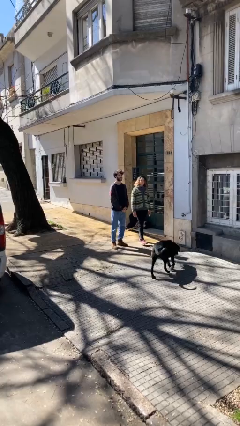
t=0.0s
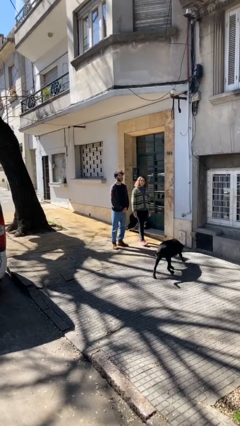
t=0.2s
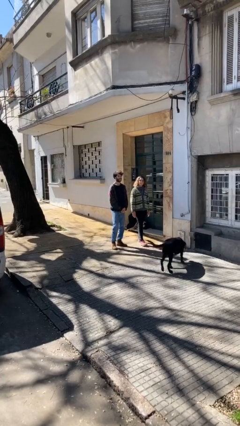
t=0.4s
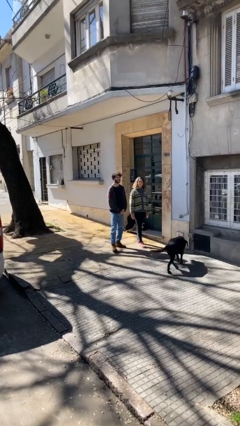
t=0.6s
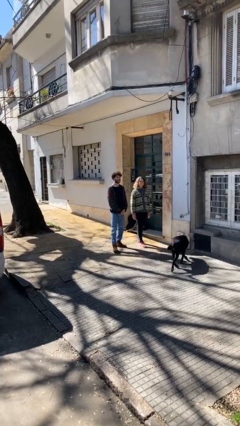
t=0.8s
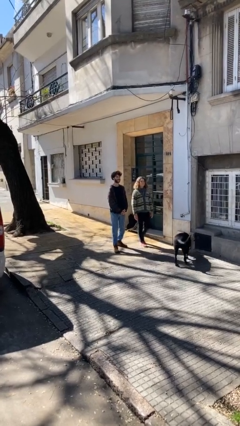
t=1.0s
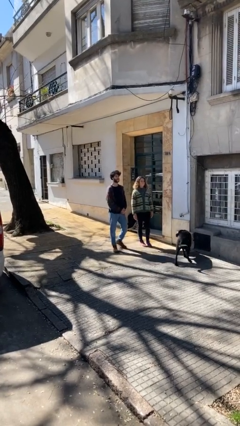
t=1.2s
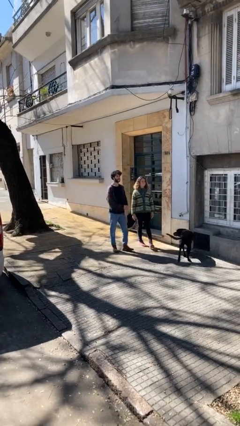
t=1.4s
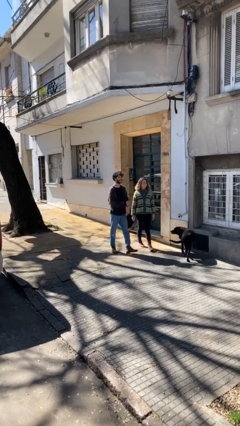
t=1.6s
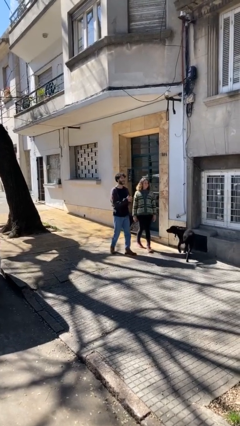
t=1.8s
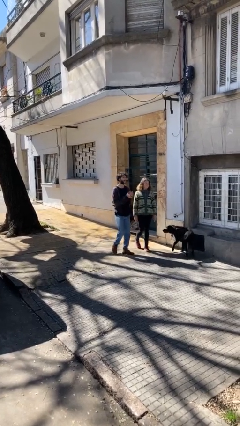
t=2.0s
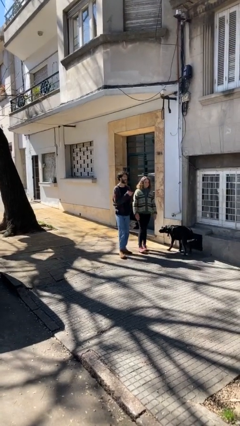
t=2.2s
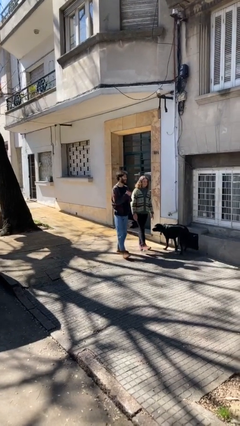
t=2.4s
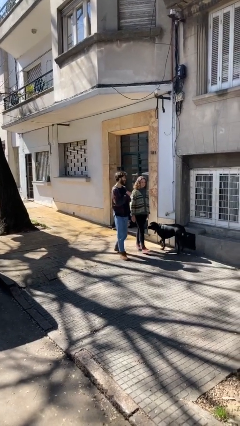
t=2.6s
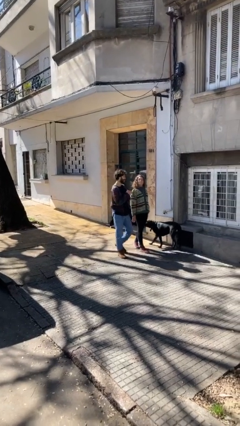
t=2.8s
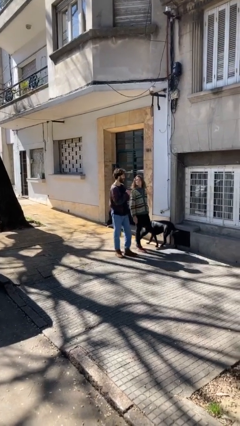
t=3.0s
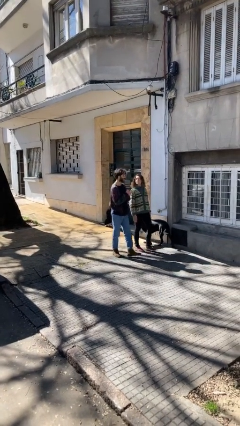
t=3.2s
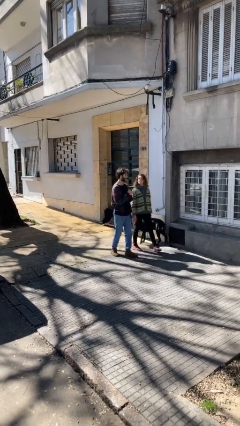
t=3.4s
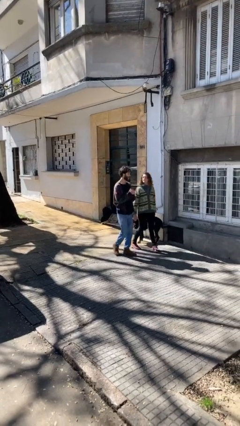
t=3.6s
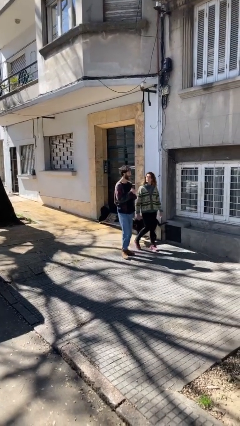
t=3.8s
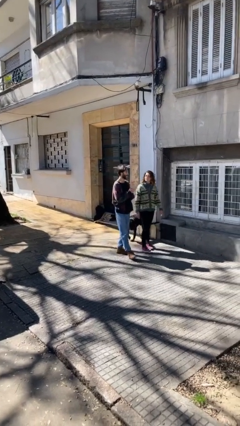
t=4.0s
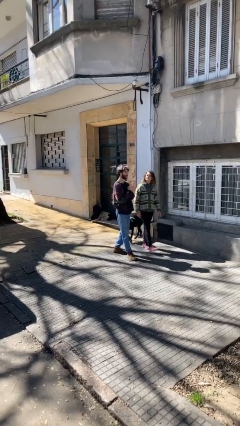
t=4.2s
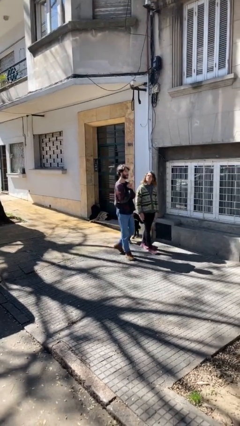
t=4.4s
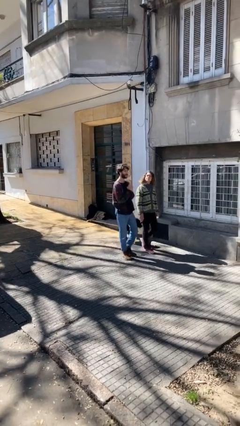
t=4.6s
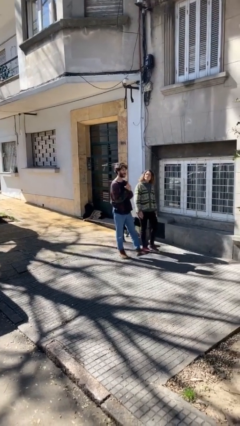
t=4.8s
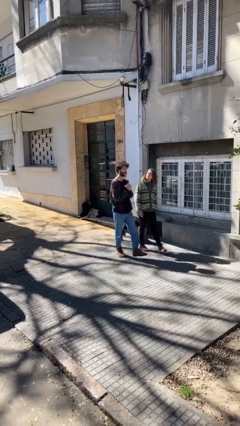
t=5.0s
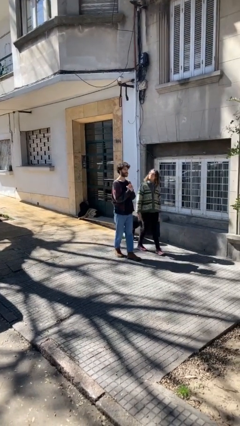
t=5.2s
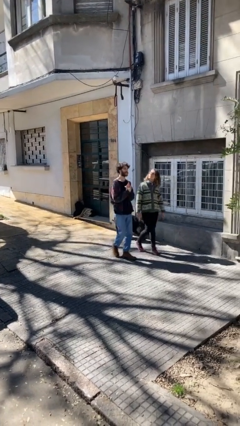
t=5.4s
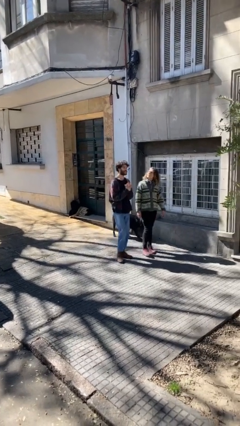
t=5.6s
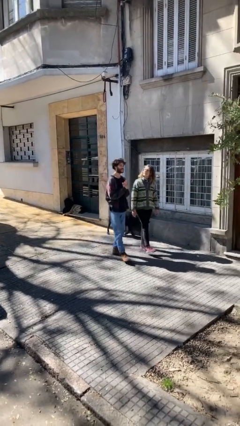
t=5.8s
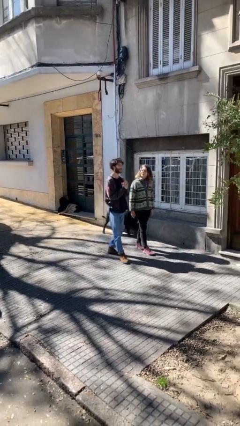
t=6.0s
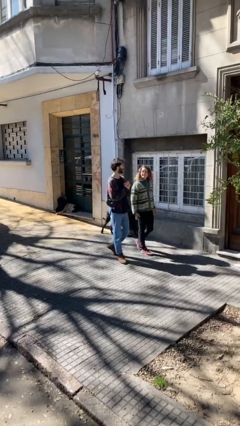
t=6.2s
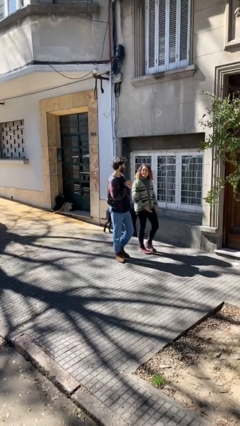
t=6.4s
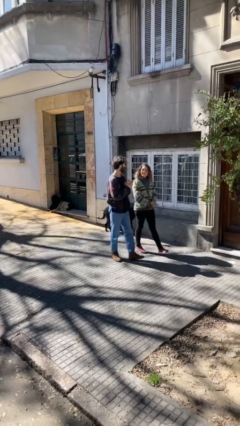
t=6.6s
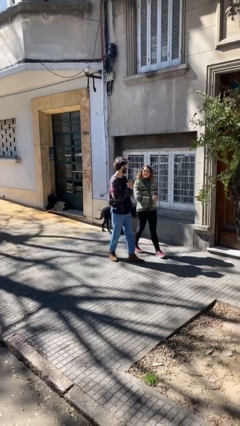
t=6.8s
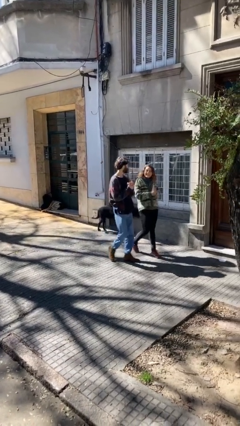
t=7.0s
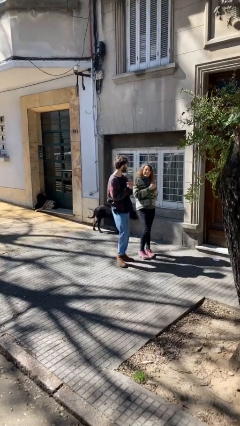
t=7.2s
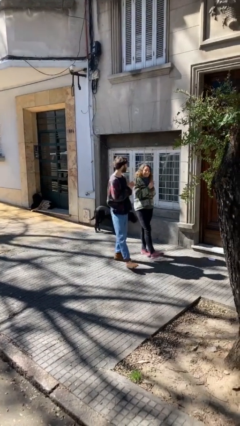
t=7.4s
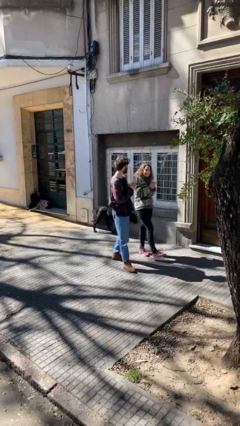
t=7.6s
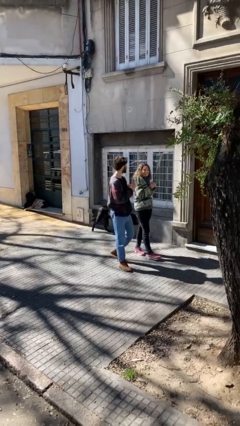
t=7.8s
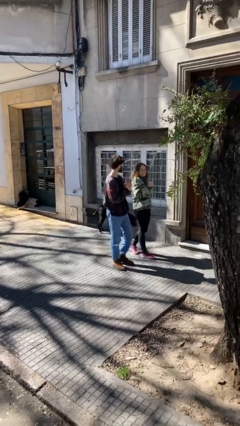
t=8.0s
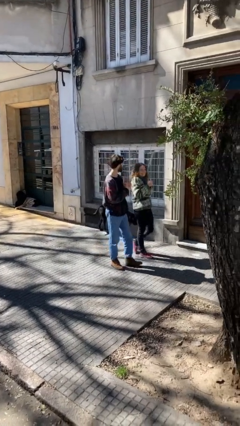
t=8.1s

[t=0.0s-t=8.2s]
person talks to person

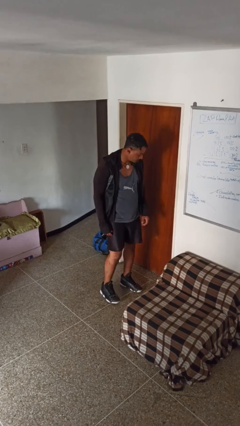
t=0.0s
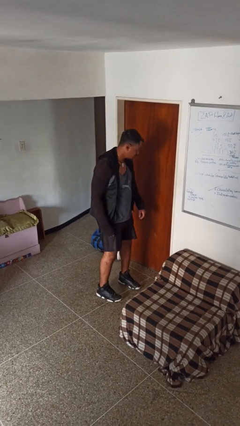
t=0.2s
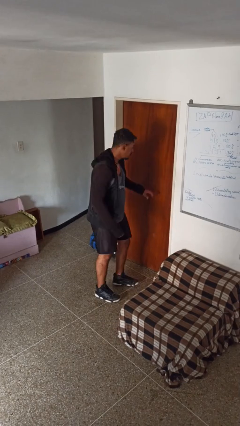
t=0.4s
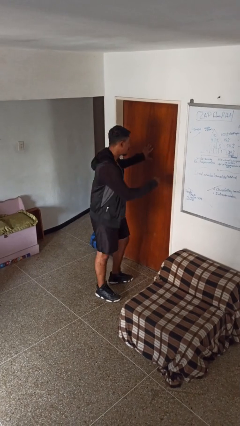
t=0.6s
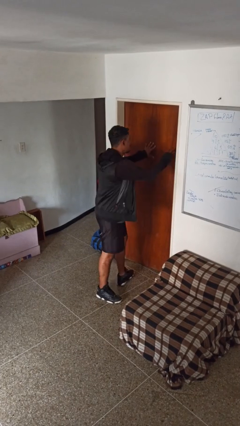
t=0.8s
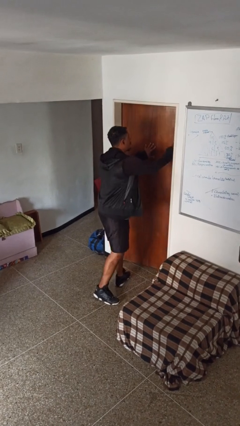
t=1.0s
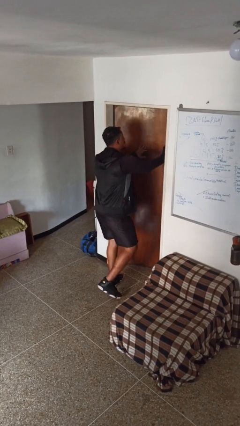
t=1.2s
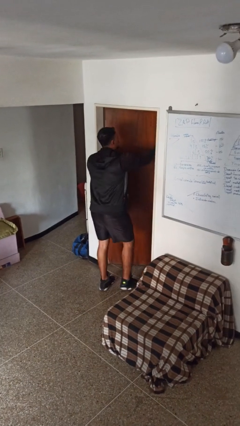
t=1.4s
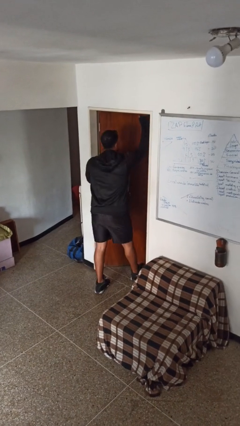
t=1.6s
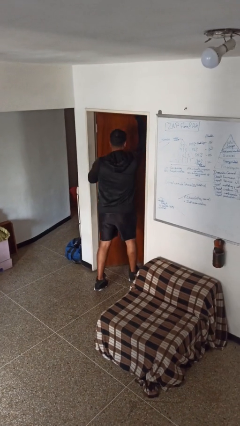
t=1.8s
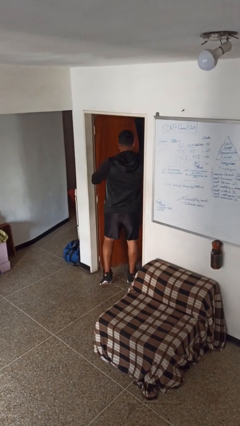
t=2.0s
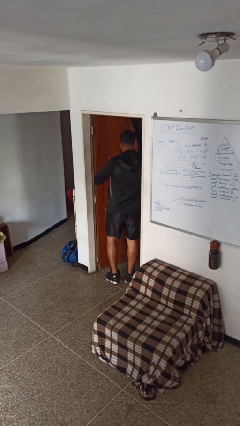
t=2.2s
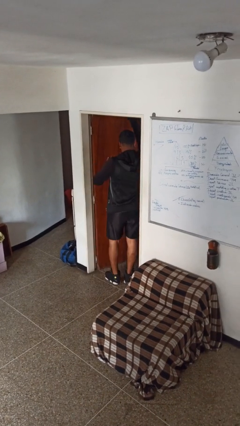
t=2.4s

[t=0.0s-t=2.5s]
person opens facility door

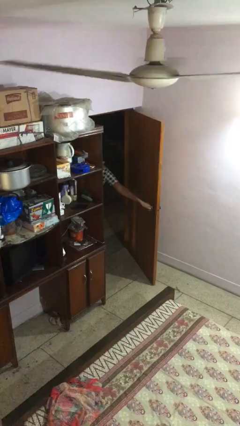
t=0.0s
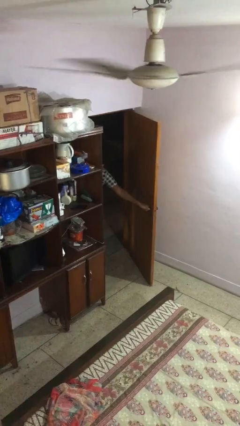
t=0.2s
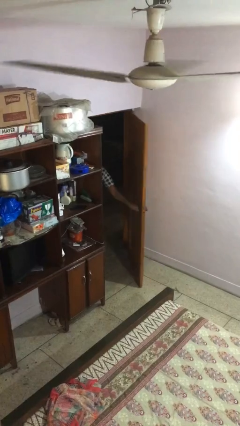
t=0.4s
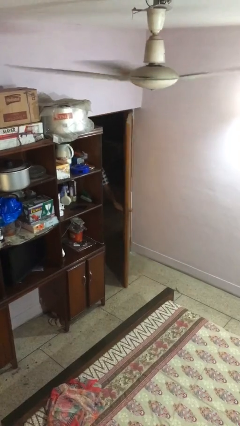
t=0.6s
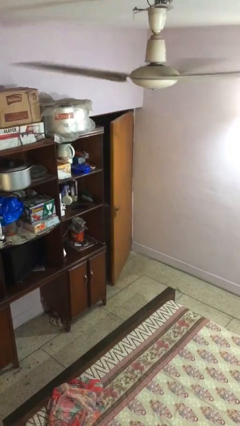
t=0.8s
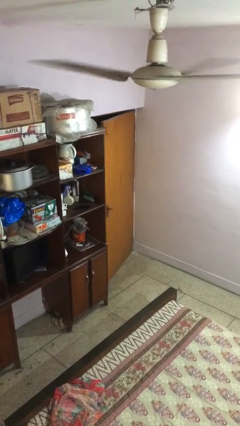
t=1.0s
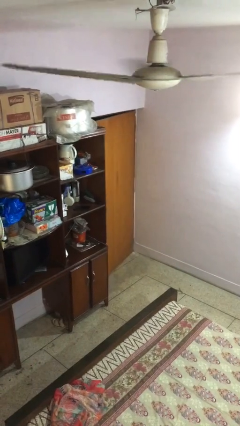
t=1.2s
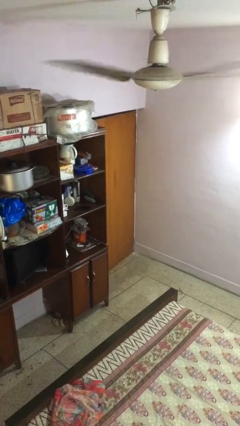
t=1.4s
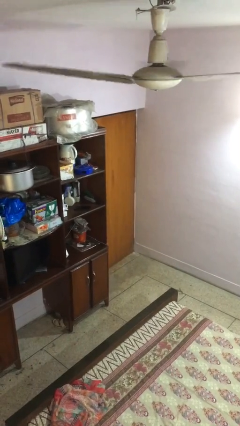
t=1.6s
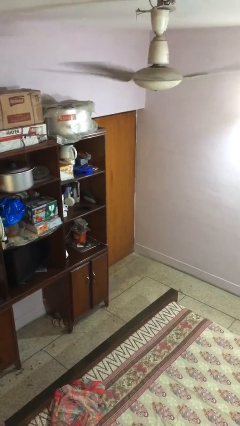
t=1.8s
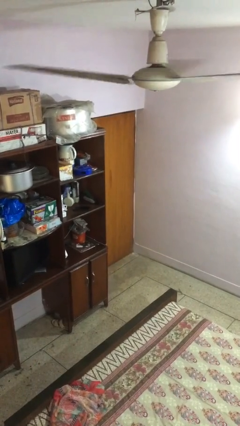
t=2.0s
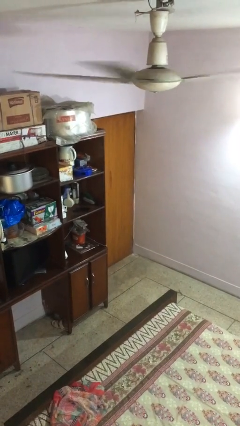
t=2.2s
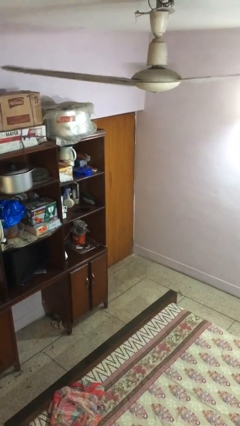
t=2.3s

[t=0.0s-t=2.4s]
person closes facility door

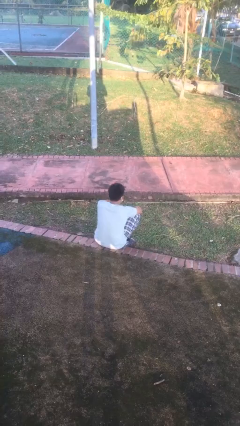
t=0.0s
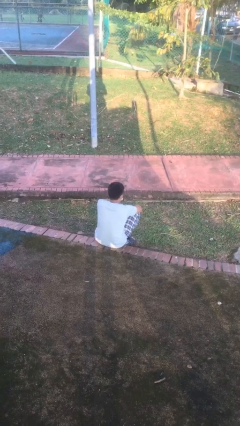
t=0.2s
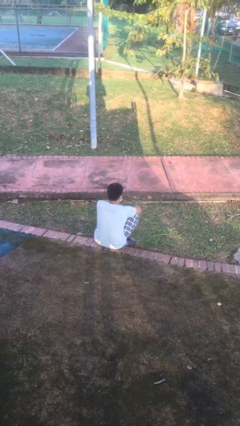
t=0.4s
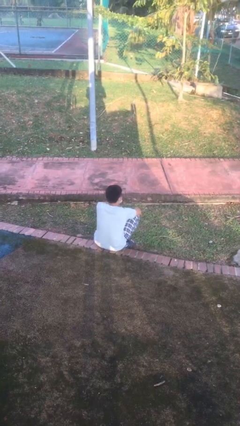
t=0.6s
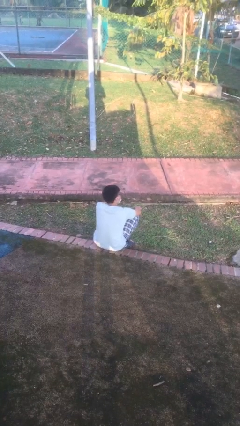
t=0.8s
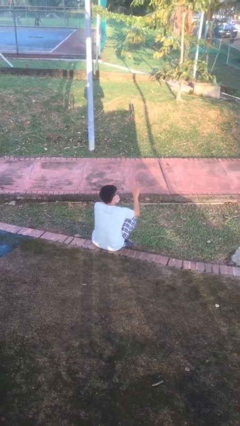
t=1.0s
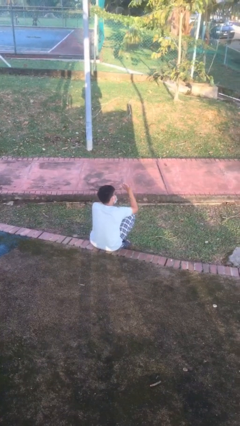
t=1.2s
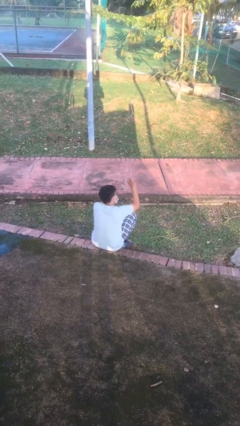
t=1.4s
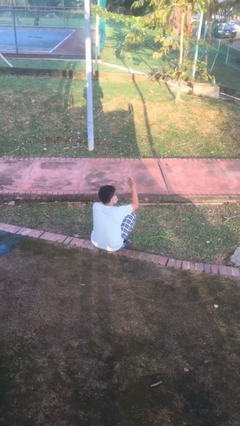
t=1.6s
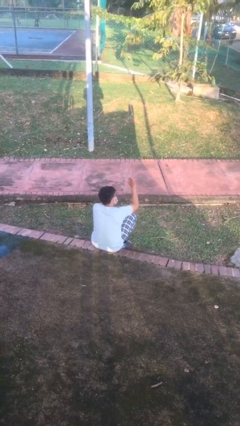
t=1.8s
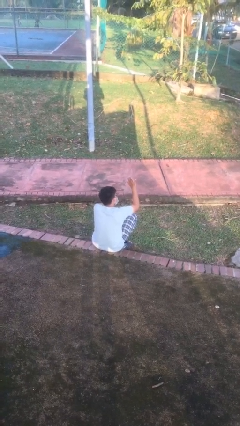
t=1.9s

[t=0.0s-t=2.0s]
person gestures stop

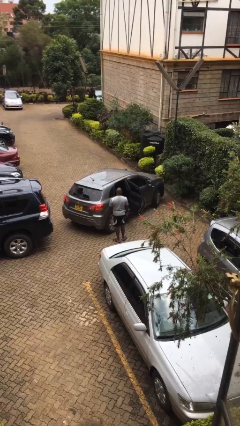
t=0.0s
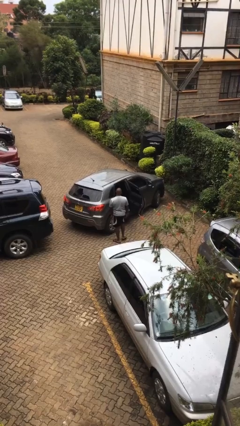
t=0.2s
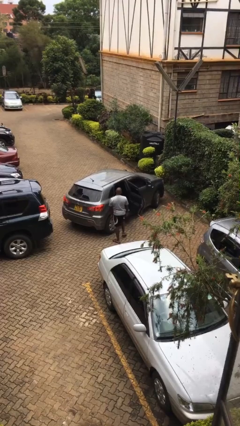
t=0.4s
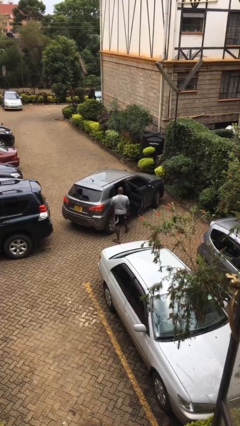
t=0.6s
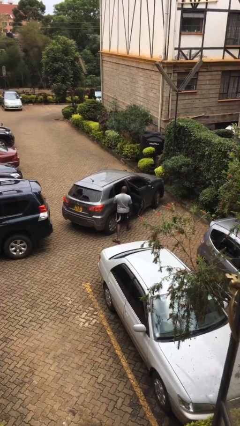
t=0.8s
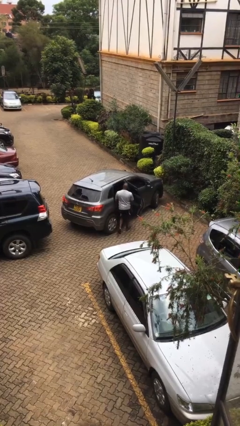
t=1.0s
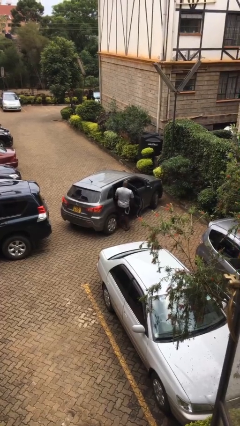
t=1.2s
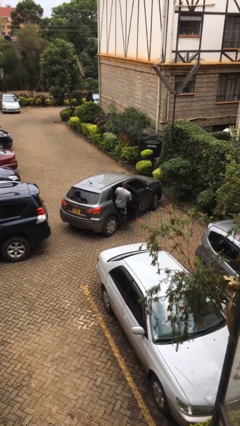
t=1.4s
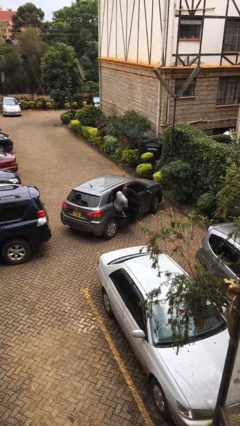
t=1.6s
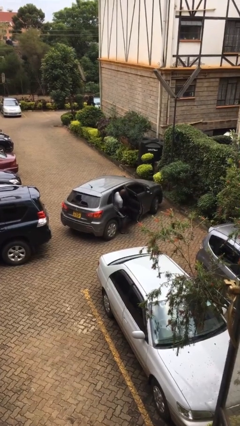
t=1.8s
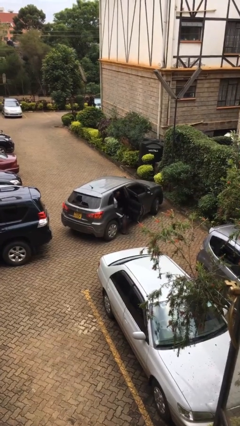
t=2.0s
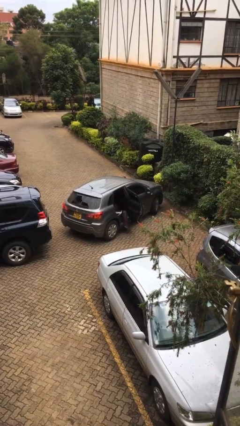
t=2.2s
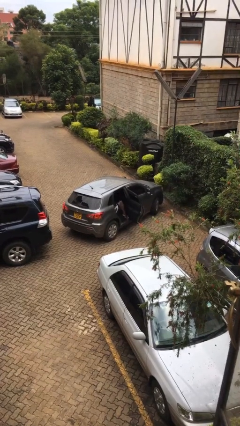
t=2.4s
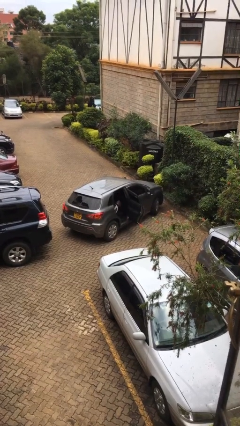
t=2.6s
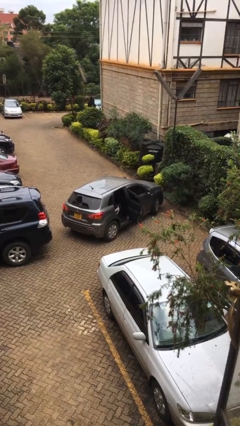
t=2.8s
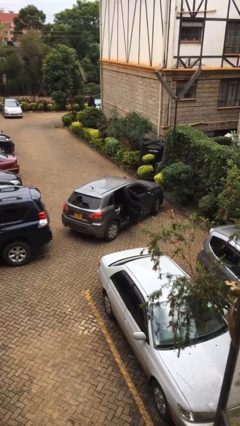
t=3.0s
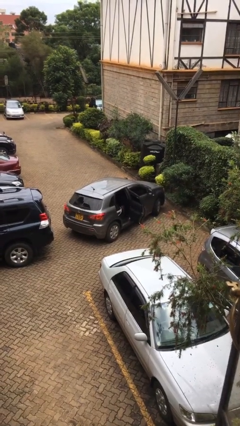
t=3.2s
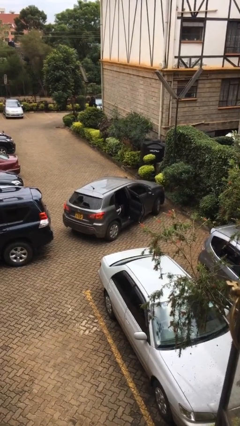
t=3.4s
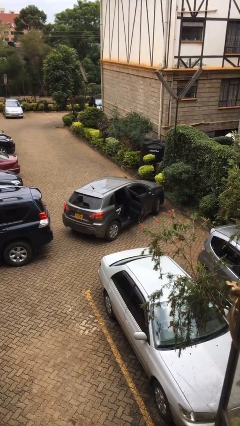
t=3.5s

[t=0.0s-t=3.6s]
person enters car
